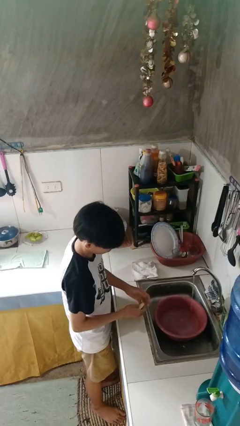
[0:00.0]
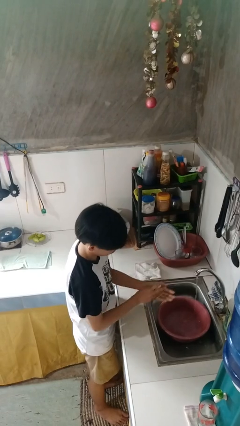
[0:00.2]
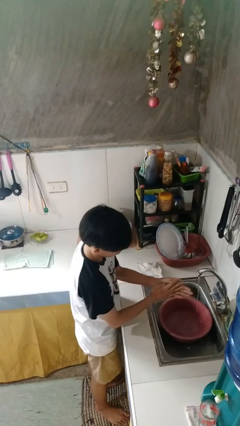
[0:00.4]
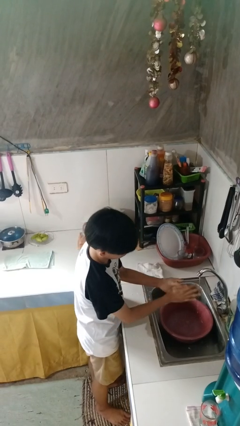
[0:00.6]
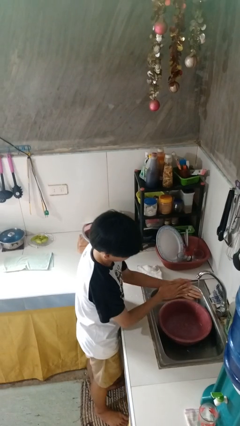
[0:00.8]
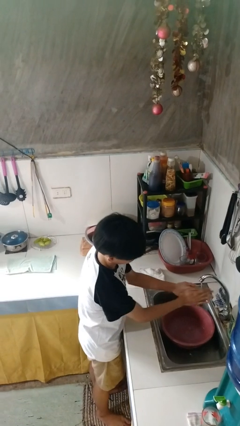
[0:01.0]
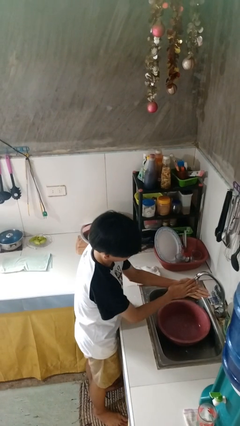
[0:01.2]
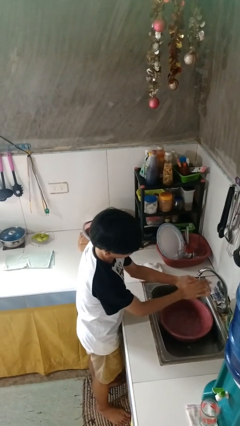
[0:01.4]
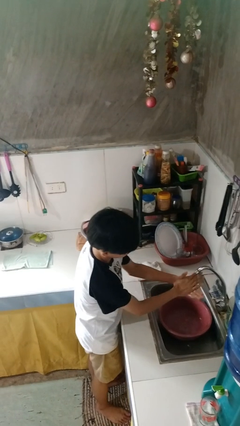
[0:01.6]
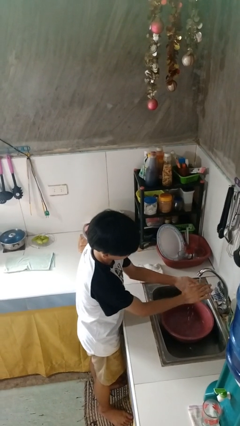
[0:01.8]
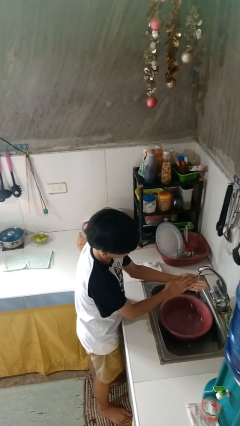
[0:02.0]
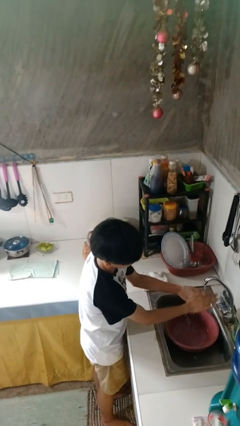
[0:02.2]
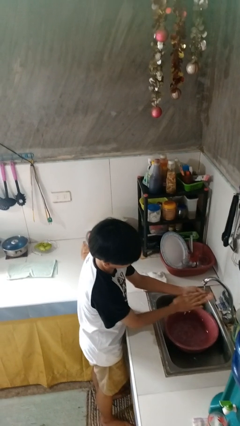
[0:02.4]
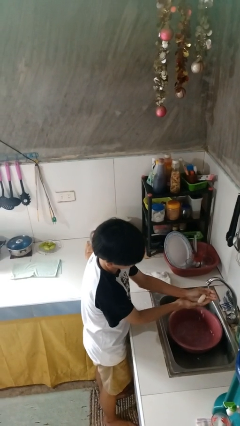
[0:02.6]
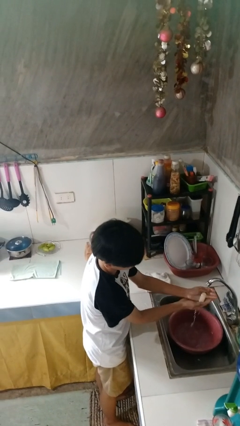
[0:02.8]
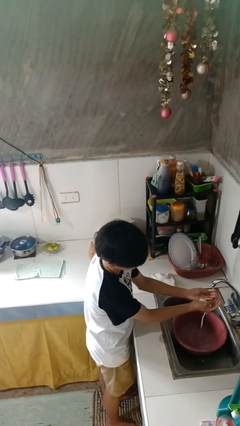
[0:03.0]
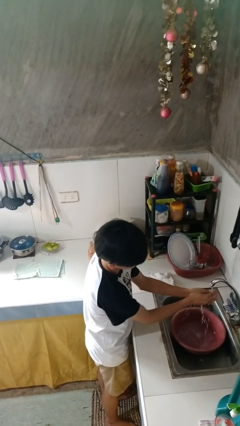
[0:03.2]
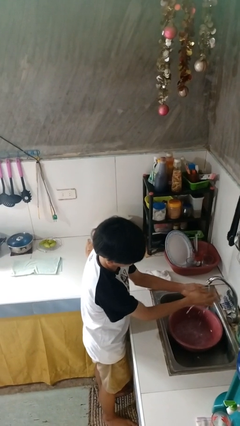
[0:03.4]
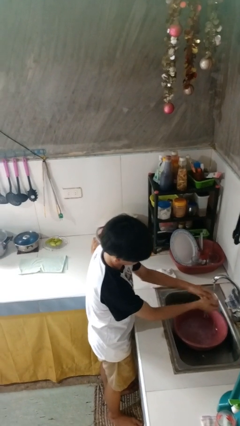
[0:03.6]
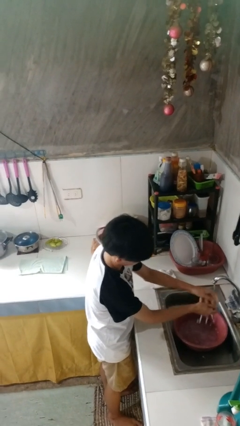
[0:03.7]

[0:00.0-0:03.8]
person washes hands

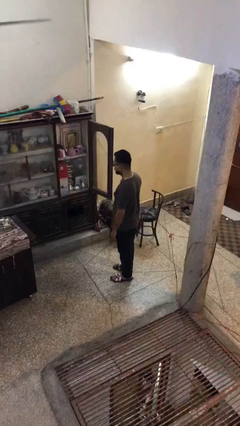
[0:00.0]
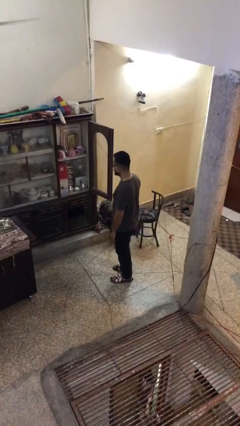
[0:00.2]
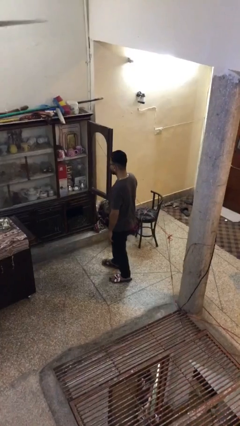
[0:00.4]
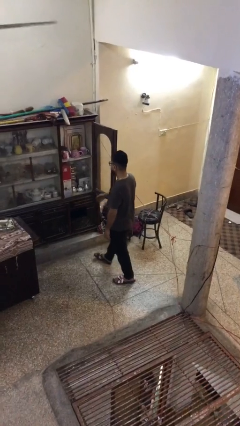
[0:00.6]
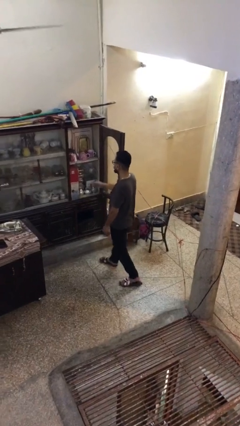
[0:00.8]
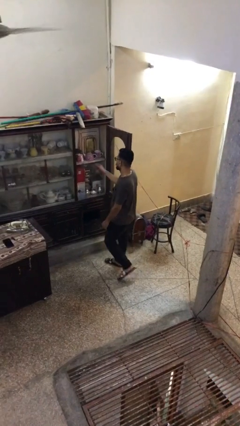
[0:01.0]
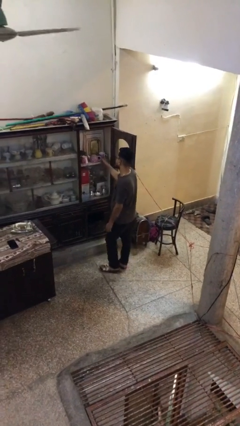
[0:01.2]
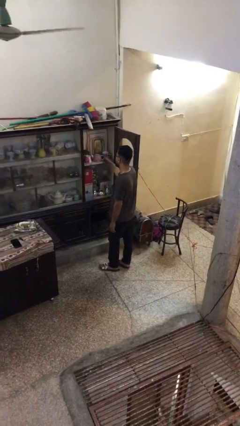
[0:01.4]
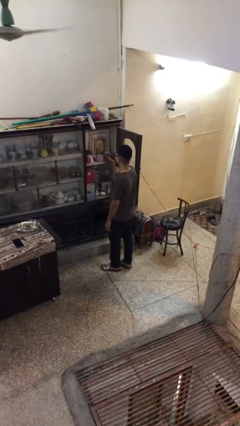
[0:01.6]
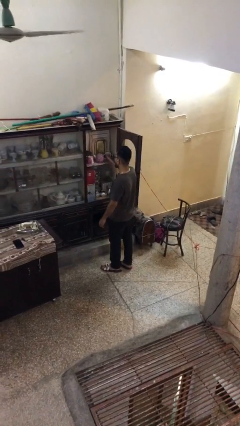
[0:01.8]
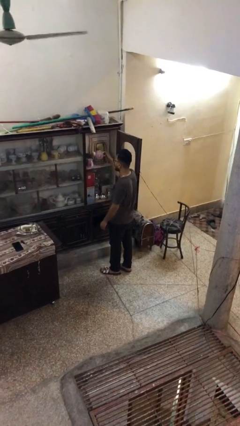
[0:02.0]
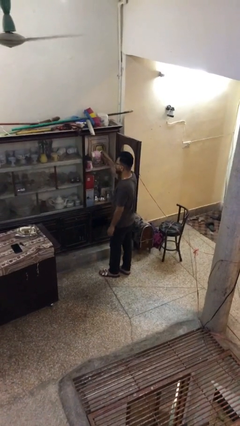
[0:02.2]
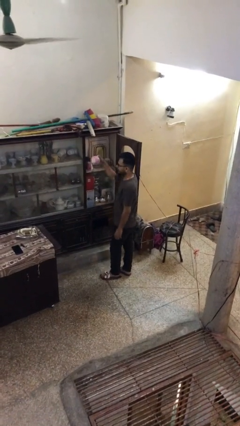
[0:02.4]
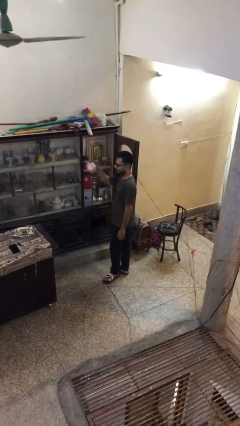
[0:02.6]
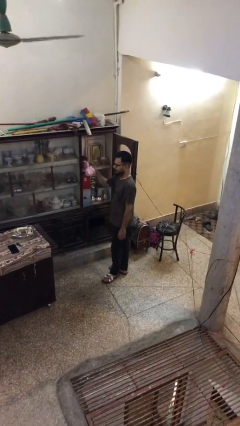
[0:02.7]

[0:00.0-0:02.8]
person picks up object from shelf

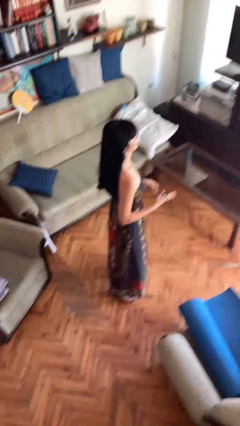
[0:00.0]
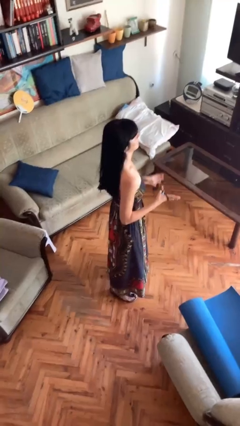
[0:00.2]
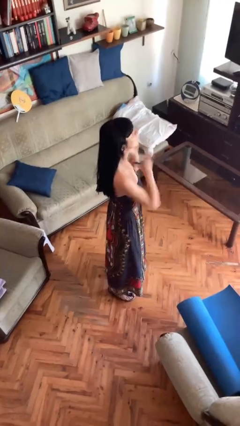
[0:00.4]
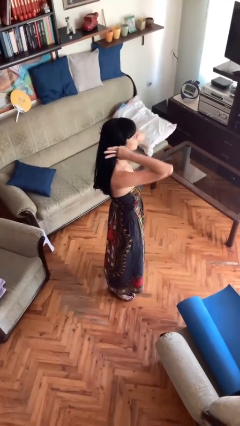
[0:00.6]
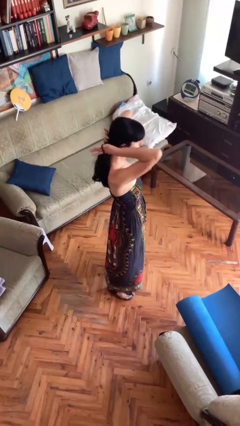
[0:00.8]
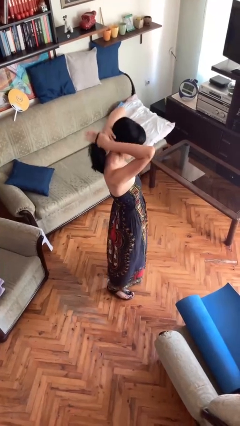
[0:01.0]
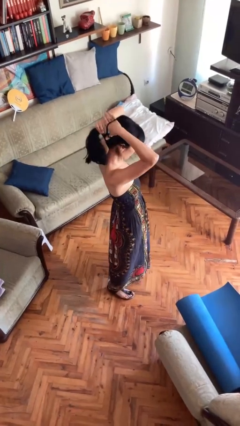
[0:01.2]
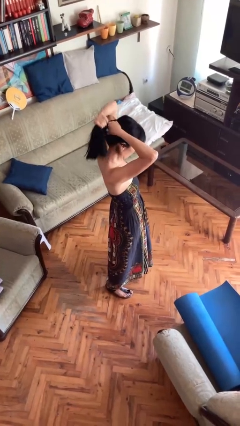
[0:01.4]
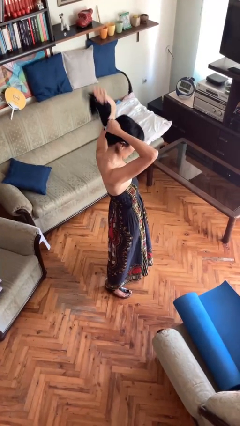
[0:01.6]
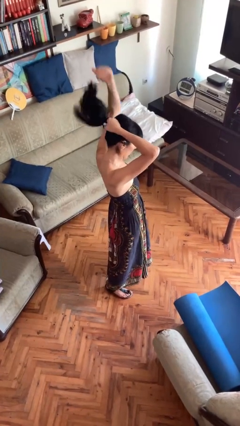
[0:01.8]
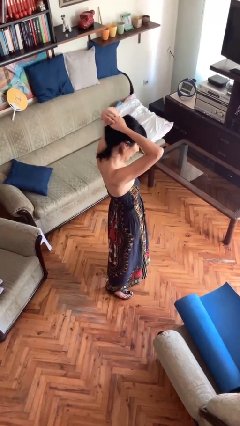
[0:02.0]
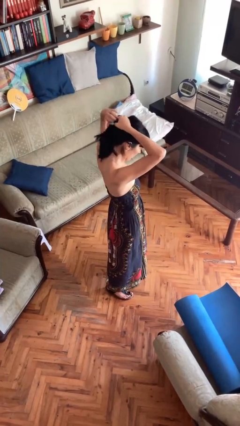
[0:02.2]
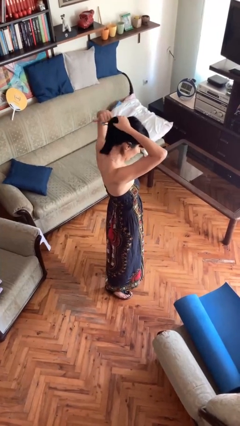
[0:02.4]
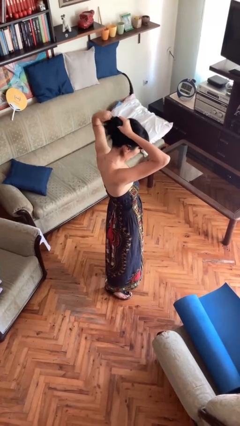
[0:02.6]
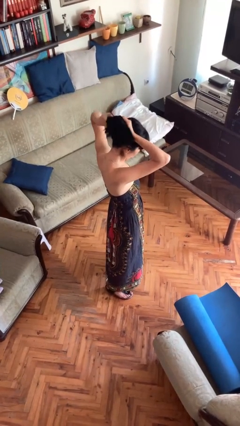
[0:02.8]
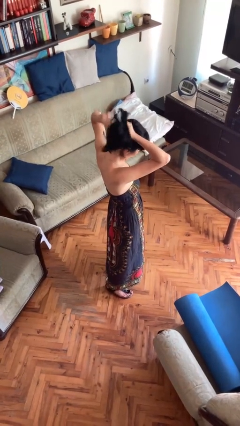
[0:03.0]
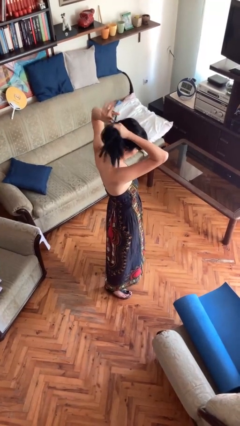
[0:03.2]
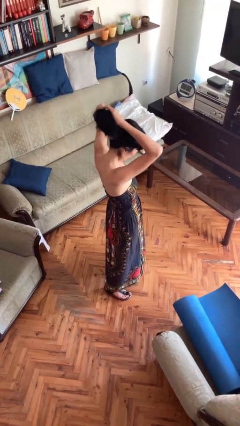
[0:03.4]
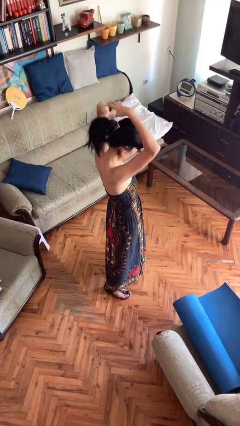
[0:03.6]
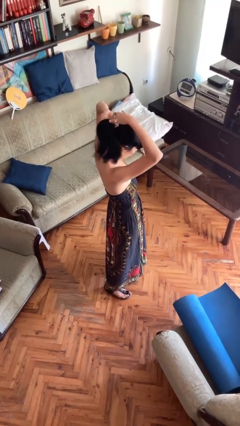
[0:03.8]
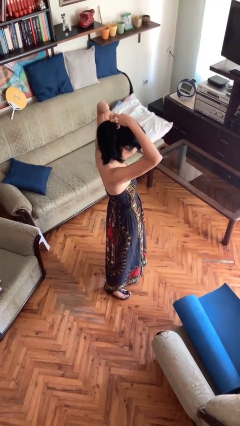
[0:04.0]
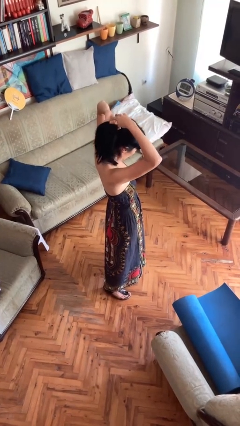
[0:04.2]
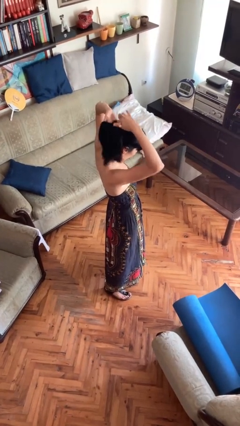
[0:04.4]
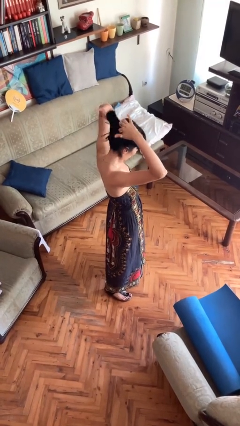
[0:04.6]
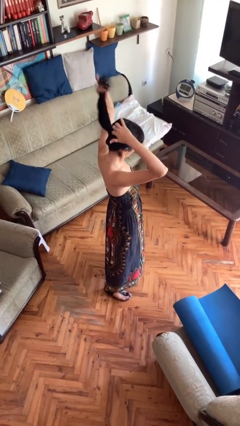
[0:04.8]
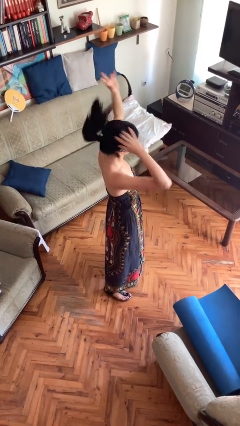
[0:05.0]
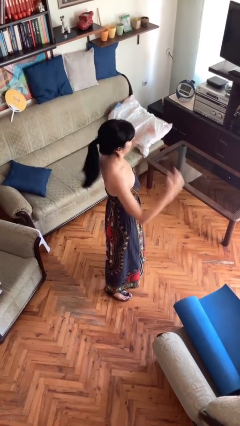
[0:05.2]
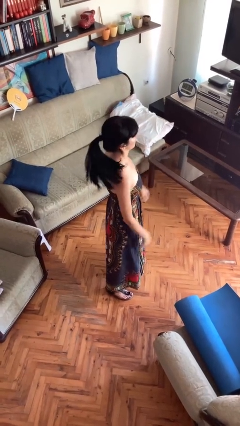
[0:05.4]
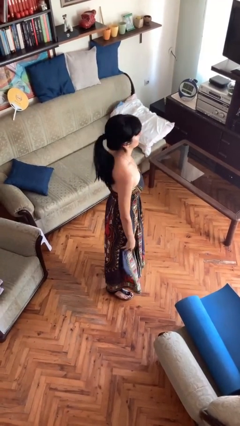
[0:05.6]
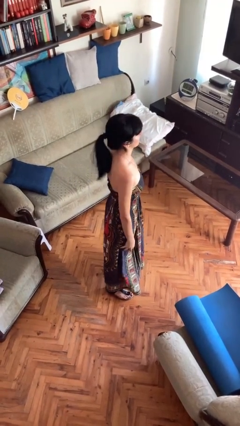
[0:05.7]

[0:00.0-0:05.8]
person puts hair in ponytail

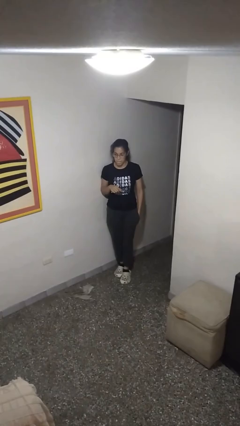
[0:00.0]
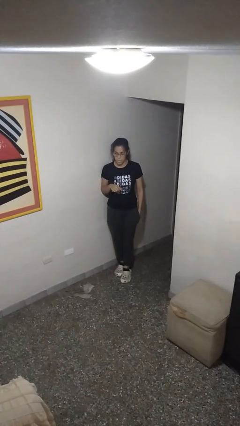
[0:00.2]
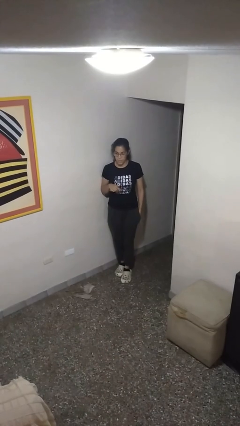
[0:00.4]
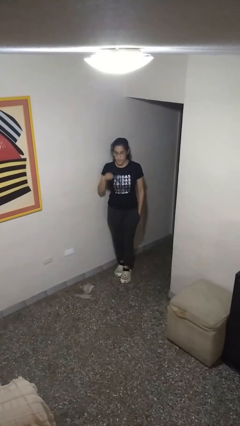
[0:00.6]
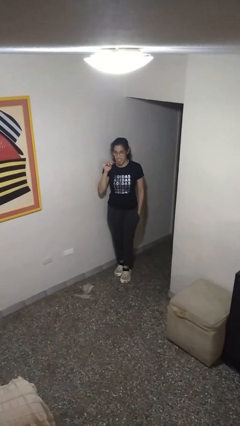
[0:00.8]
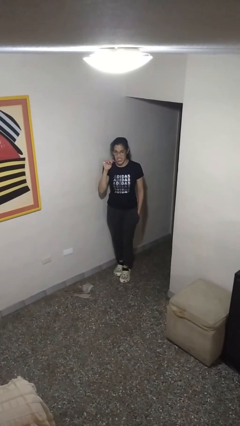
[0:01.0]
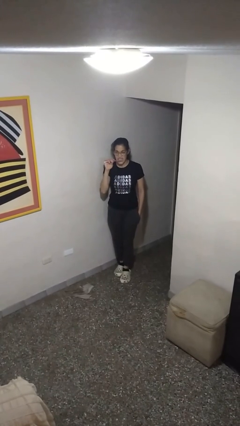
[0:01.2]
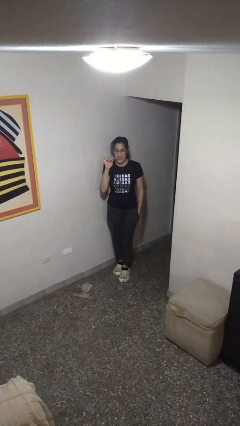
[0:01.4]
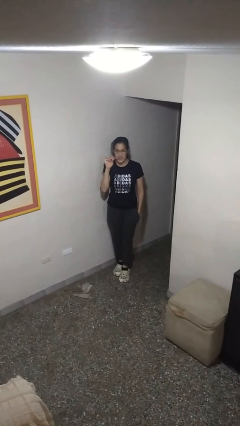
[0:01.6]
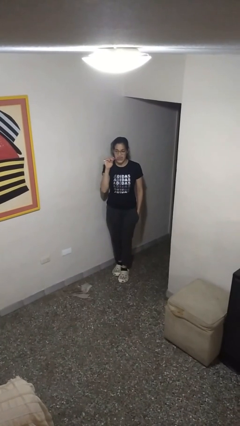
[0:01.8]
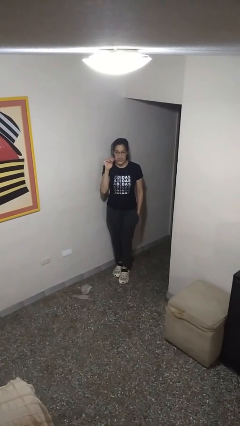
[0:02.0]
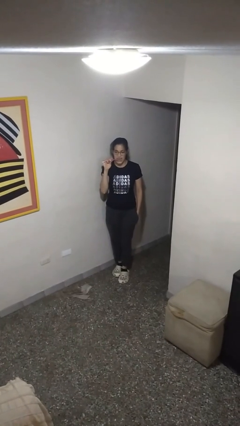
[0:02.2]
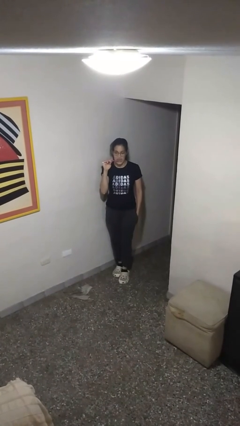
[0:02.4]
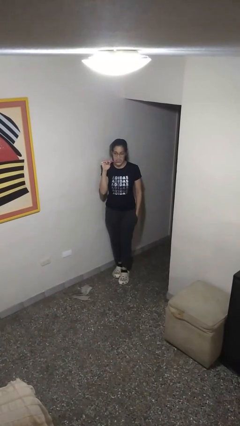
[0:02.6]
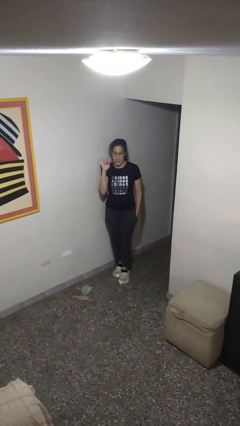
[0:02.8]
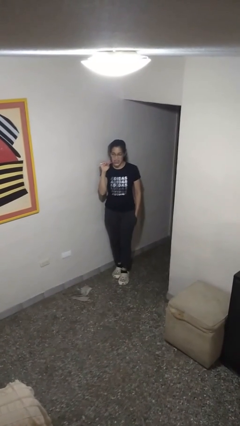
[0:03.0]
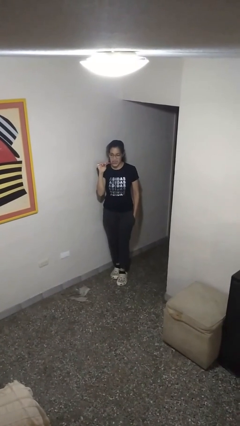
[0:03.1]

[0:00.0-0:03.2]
person brushes teeth

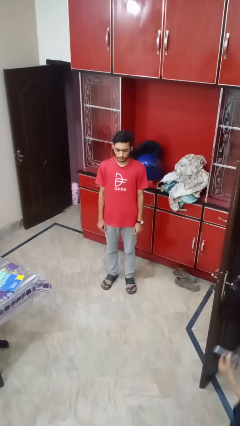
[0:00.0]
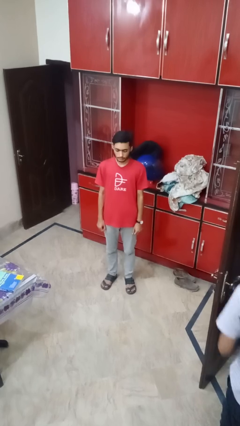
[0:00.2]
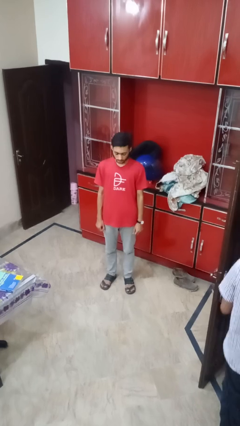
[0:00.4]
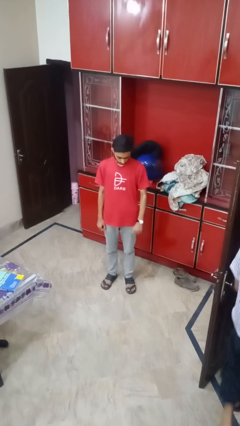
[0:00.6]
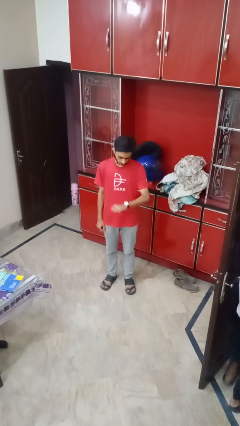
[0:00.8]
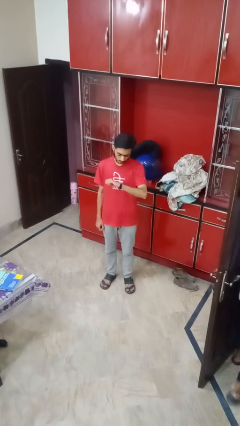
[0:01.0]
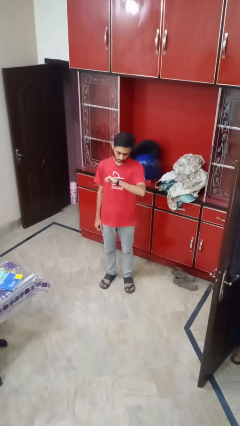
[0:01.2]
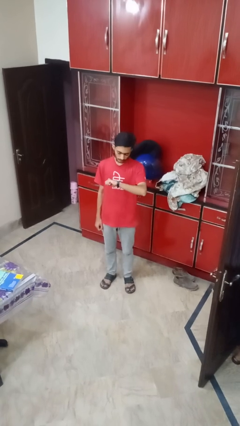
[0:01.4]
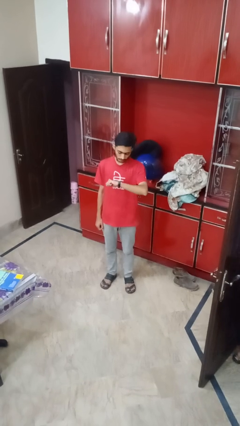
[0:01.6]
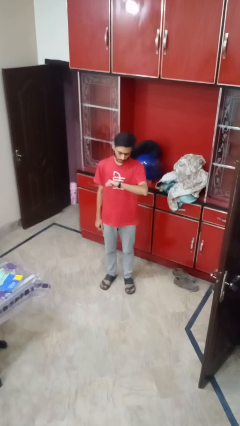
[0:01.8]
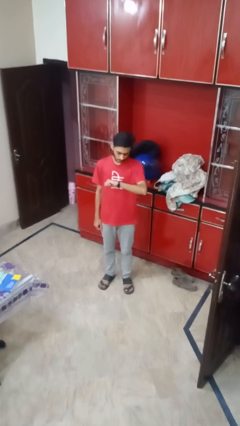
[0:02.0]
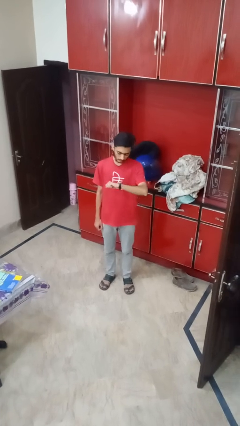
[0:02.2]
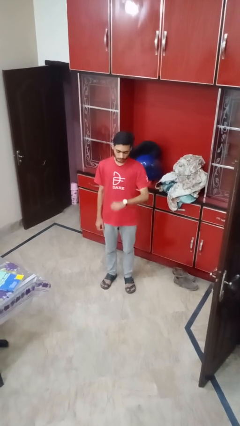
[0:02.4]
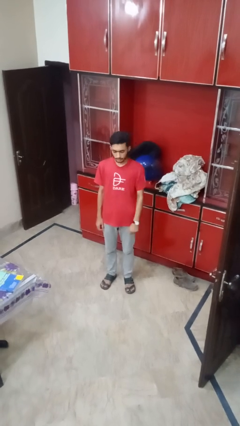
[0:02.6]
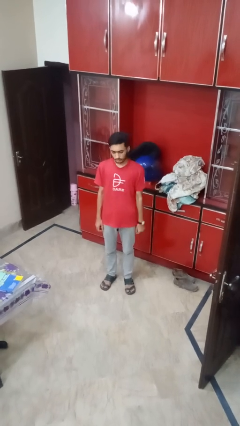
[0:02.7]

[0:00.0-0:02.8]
person looks at wristwatch
